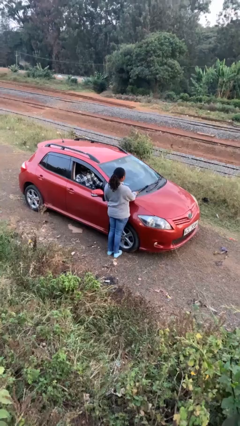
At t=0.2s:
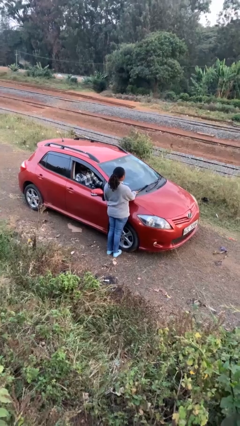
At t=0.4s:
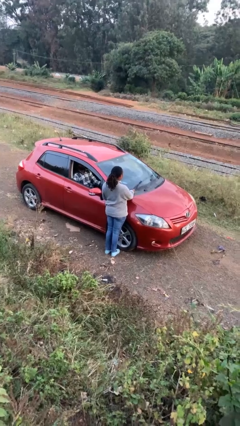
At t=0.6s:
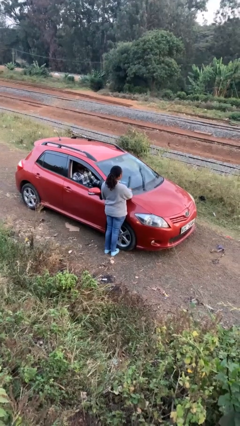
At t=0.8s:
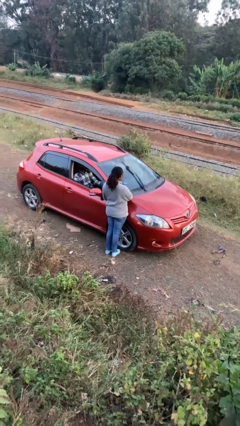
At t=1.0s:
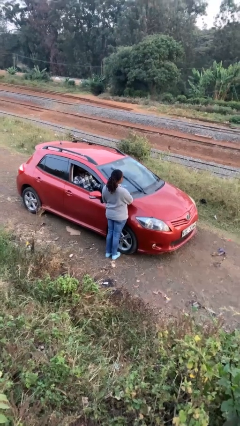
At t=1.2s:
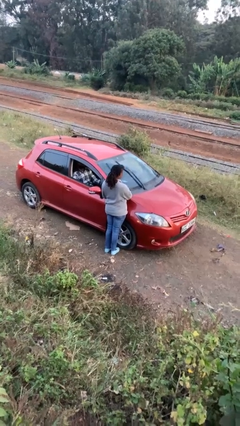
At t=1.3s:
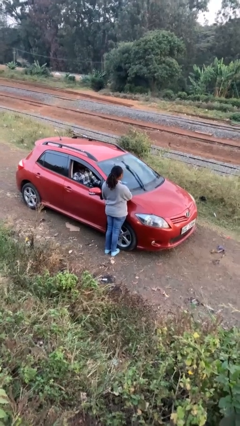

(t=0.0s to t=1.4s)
person flips up car wipers

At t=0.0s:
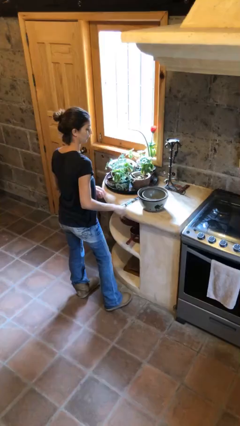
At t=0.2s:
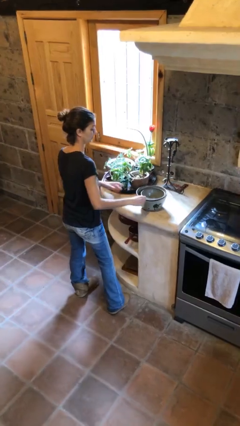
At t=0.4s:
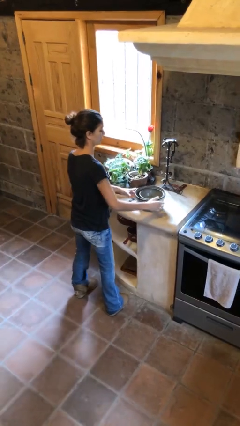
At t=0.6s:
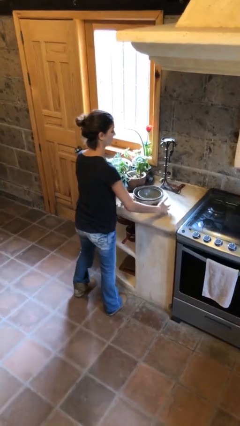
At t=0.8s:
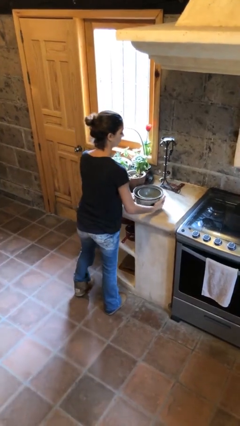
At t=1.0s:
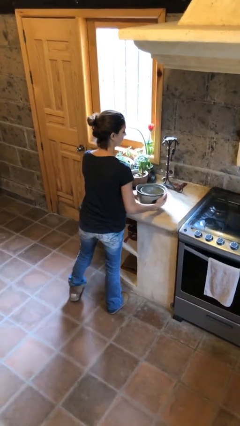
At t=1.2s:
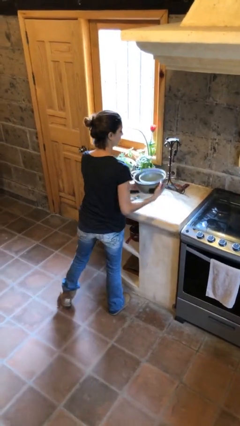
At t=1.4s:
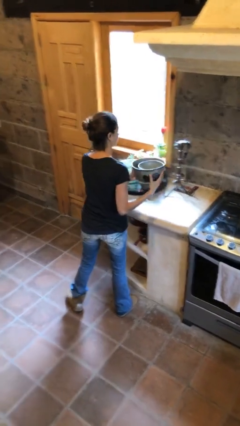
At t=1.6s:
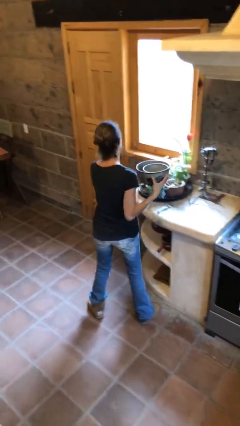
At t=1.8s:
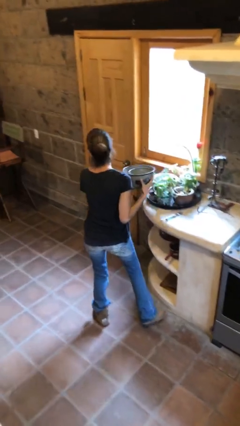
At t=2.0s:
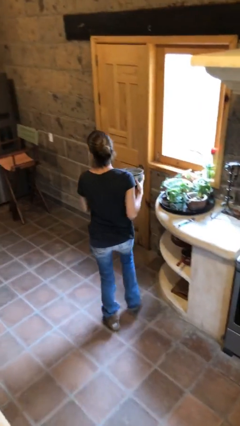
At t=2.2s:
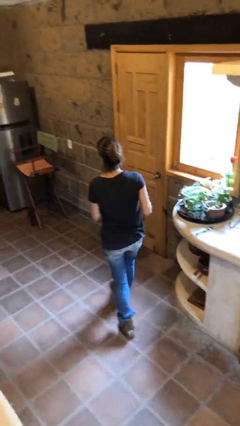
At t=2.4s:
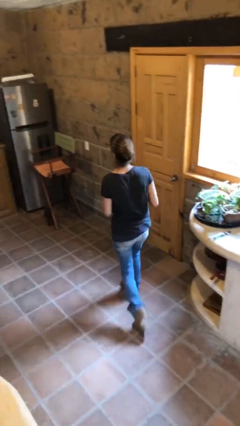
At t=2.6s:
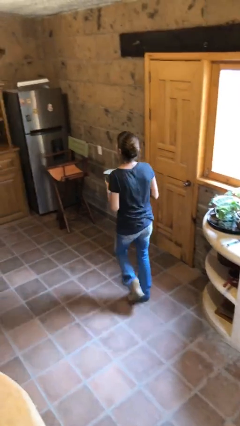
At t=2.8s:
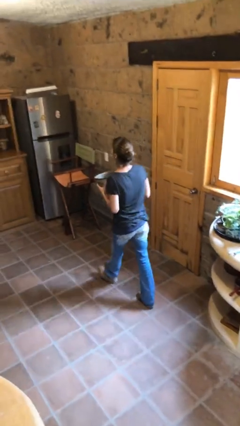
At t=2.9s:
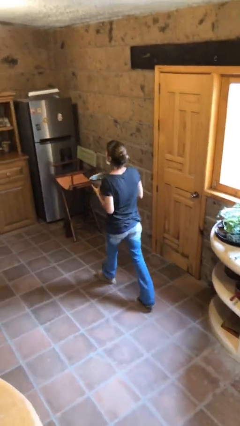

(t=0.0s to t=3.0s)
person picks up object from table

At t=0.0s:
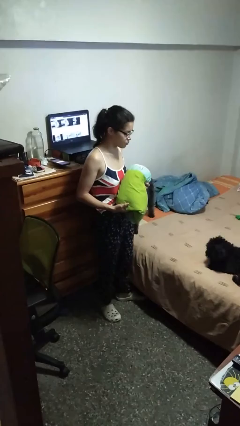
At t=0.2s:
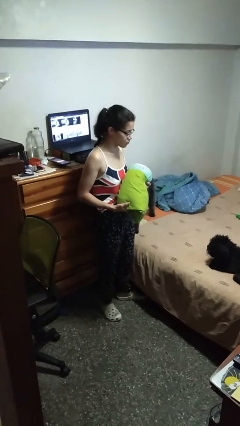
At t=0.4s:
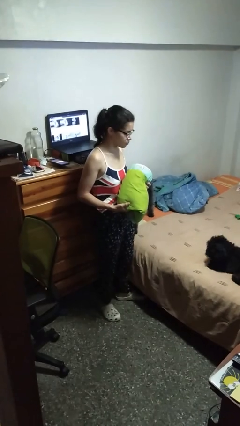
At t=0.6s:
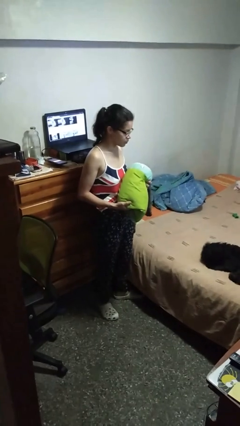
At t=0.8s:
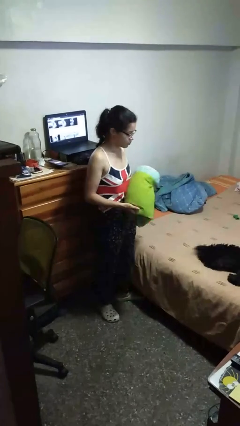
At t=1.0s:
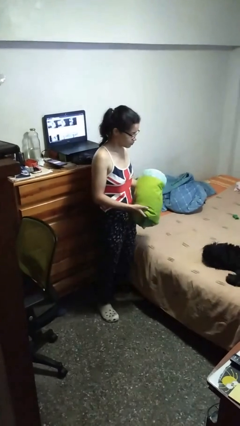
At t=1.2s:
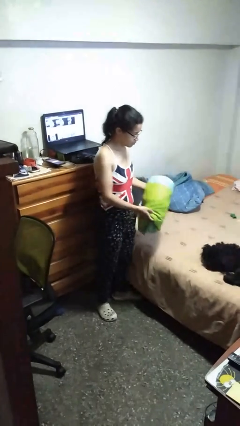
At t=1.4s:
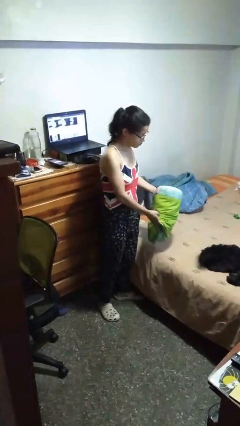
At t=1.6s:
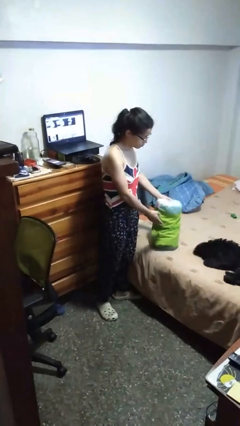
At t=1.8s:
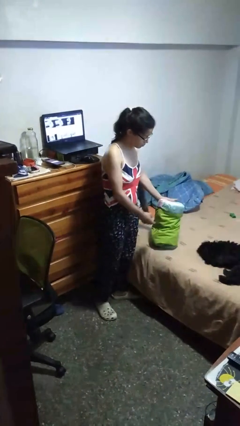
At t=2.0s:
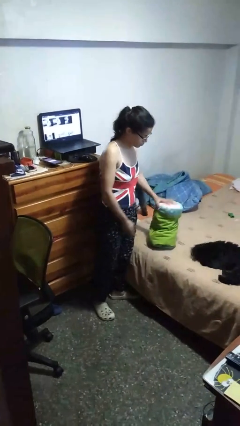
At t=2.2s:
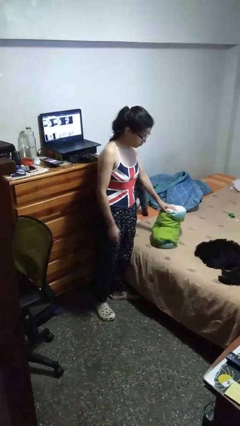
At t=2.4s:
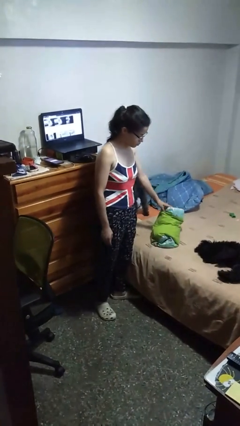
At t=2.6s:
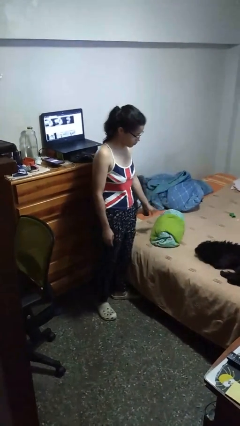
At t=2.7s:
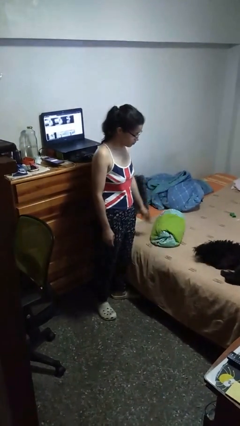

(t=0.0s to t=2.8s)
person puts down object on bed

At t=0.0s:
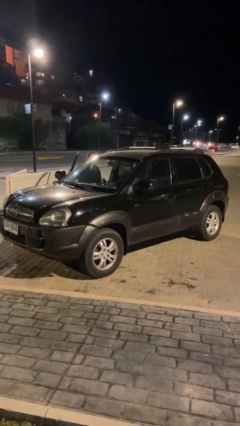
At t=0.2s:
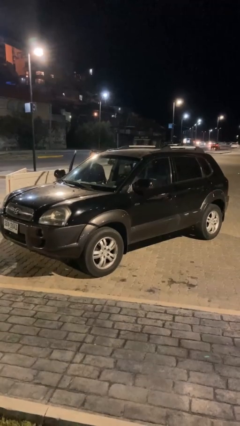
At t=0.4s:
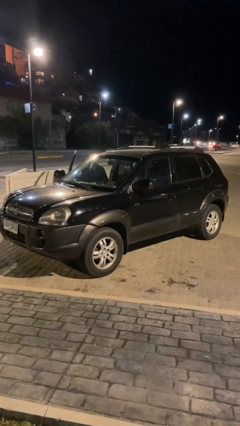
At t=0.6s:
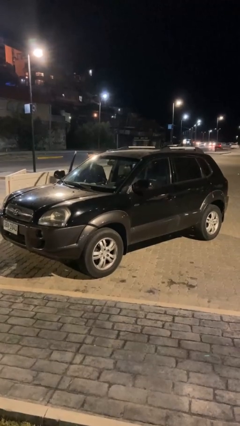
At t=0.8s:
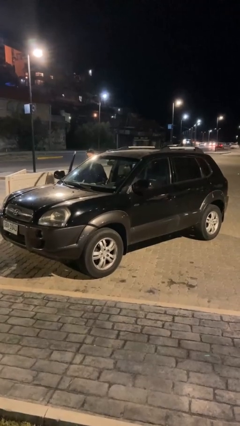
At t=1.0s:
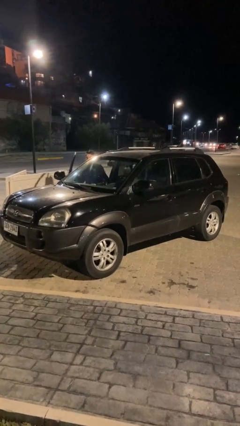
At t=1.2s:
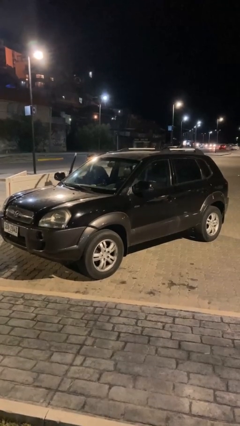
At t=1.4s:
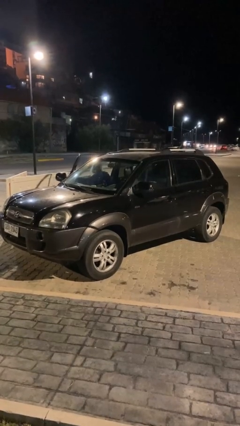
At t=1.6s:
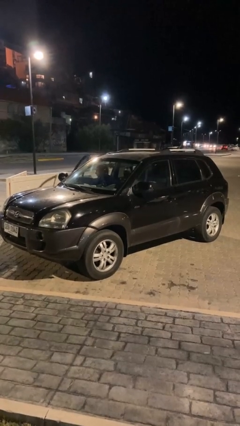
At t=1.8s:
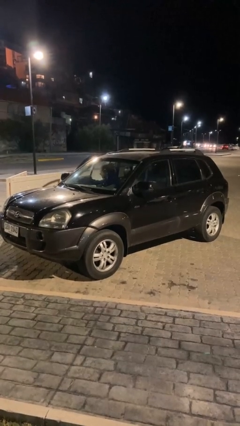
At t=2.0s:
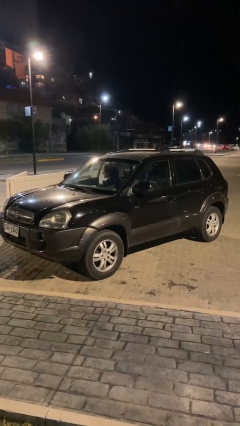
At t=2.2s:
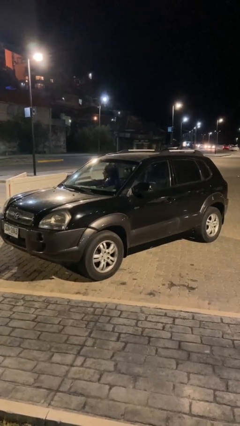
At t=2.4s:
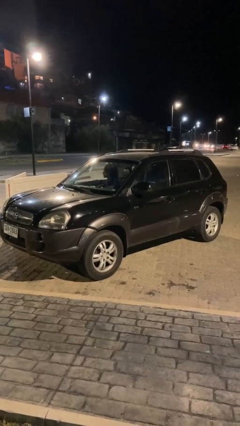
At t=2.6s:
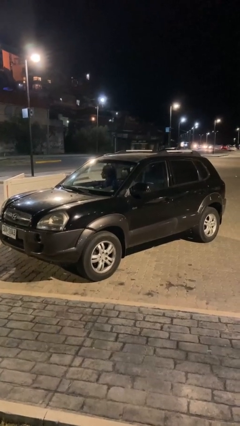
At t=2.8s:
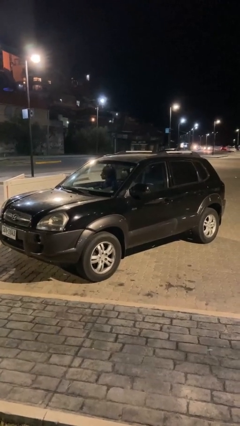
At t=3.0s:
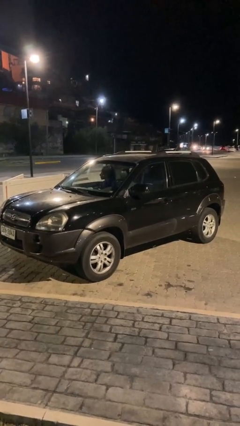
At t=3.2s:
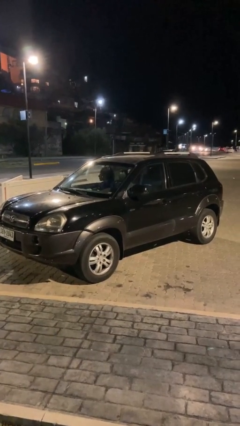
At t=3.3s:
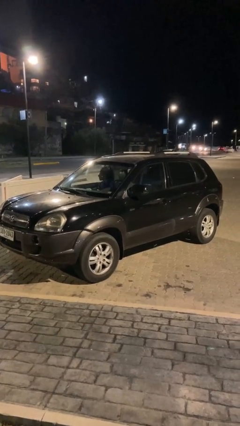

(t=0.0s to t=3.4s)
car picks up person

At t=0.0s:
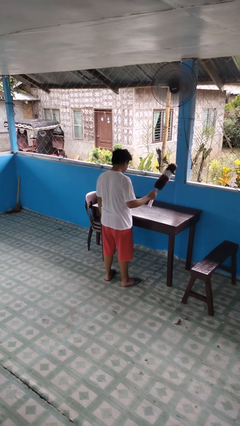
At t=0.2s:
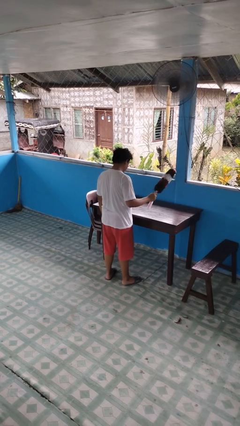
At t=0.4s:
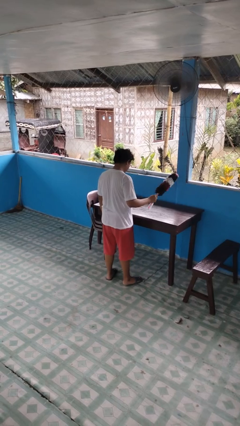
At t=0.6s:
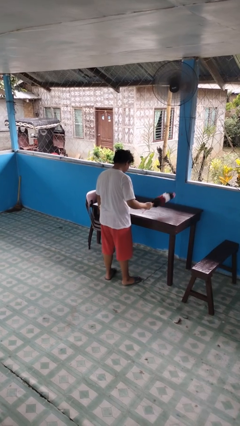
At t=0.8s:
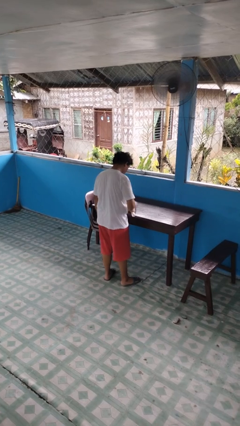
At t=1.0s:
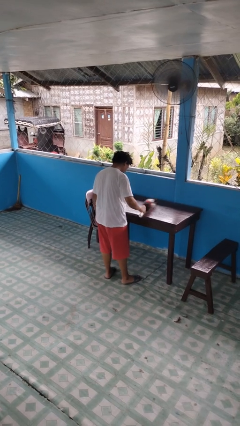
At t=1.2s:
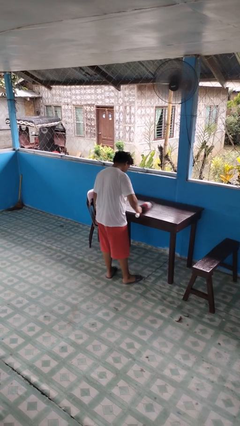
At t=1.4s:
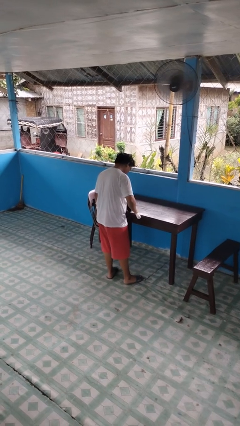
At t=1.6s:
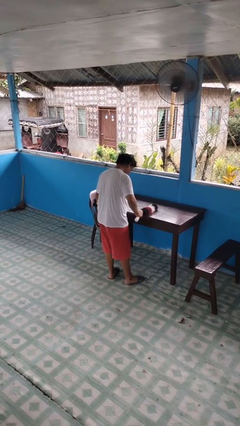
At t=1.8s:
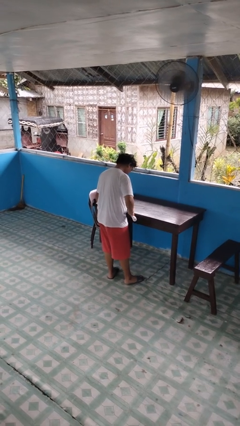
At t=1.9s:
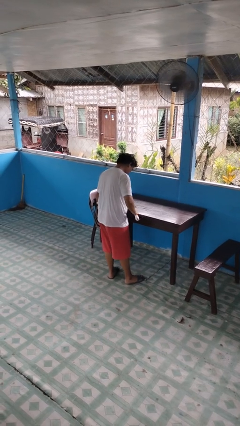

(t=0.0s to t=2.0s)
person dusts furniture

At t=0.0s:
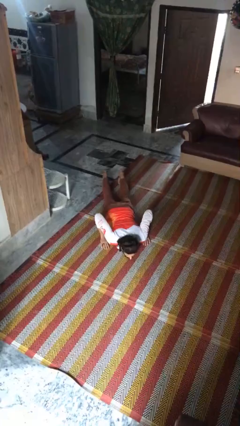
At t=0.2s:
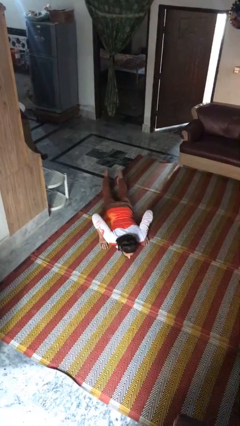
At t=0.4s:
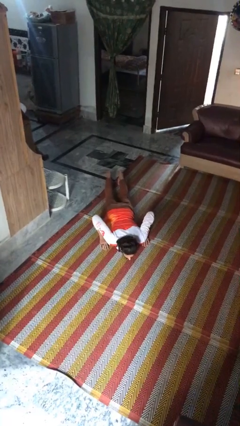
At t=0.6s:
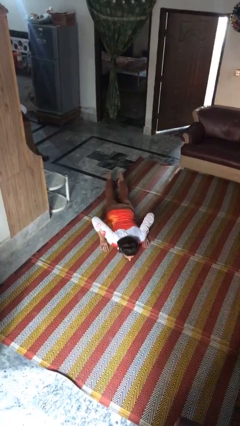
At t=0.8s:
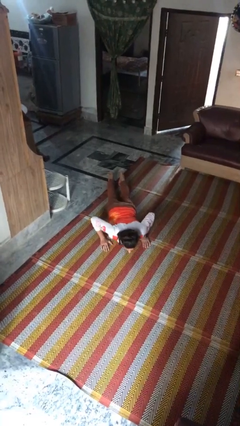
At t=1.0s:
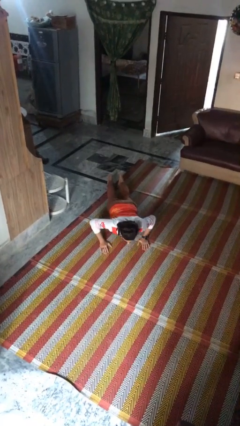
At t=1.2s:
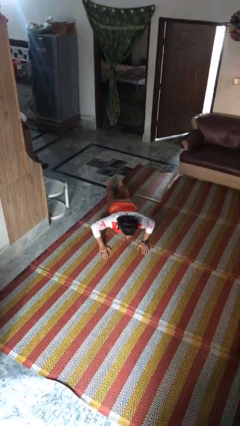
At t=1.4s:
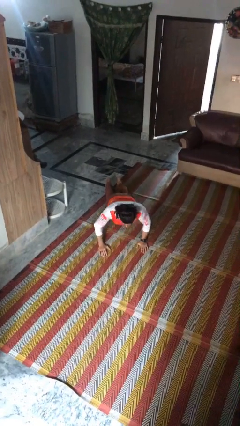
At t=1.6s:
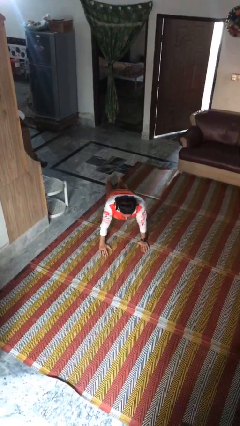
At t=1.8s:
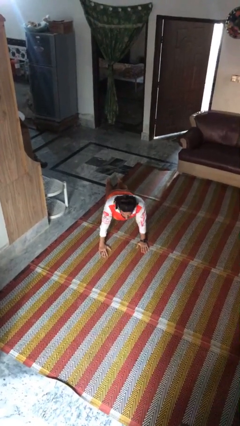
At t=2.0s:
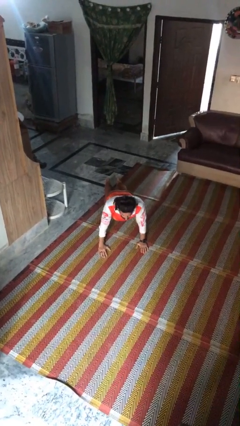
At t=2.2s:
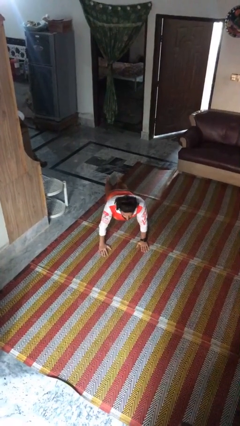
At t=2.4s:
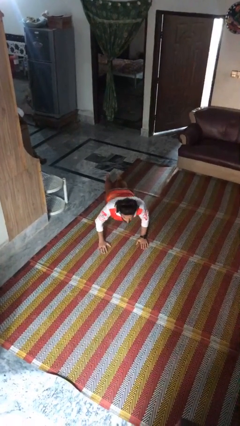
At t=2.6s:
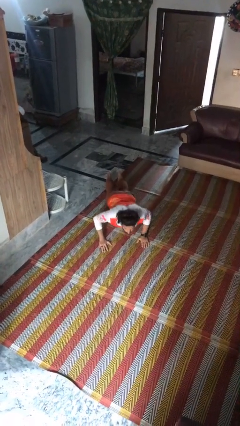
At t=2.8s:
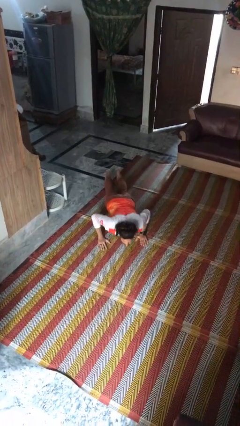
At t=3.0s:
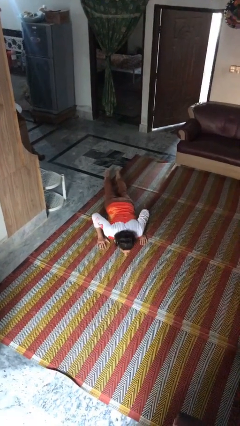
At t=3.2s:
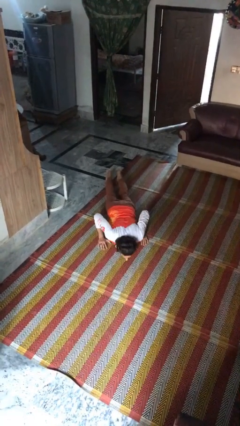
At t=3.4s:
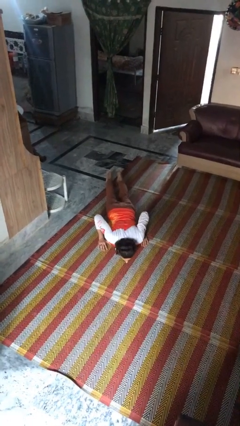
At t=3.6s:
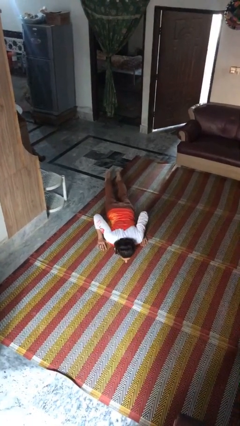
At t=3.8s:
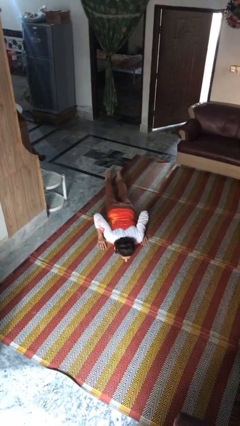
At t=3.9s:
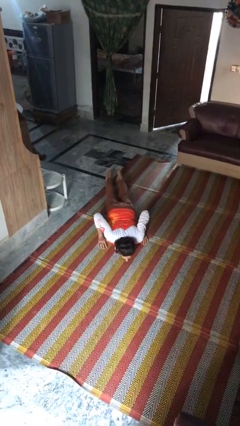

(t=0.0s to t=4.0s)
person exercises with pushup

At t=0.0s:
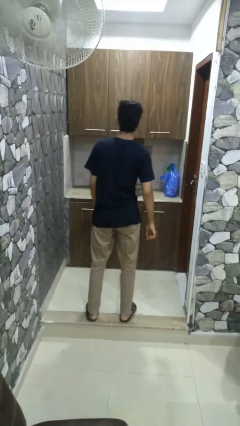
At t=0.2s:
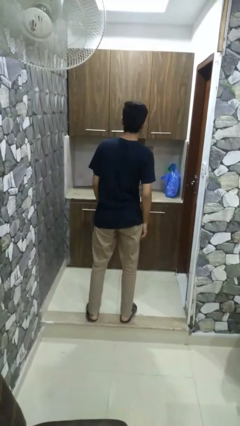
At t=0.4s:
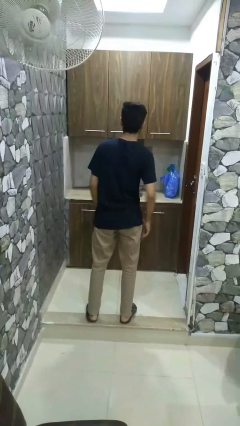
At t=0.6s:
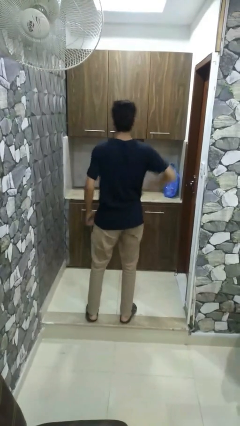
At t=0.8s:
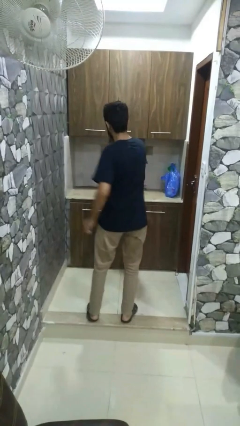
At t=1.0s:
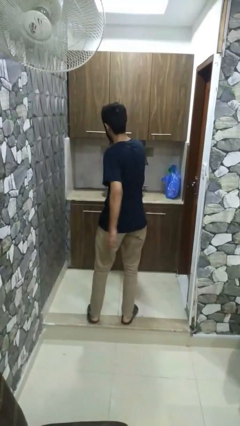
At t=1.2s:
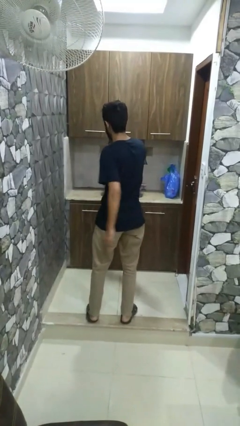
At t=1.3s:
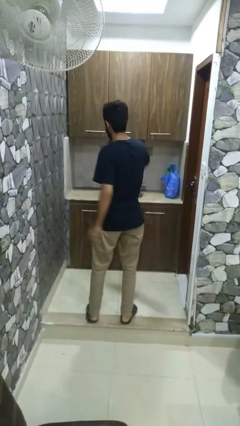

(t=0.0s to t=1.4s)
person karate chop
